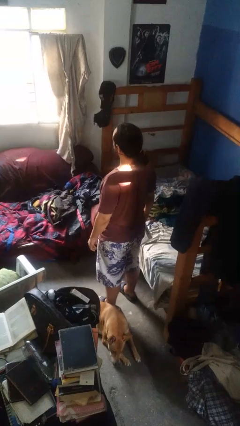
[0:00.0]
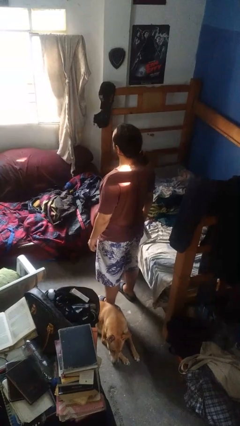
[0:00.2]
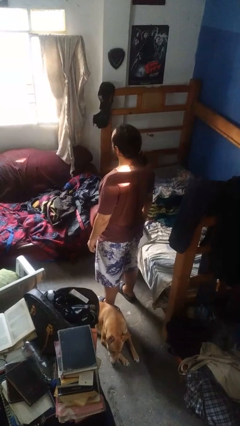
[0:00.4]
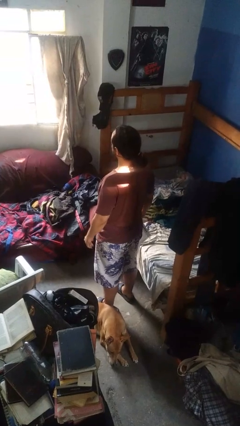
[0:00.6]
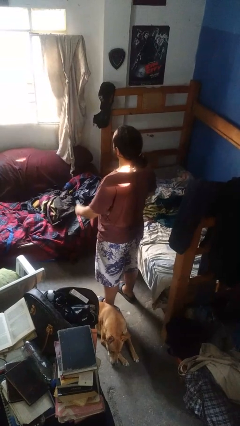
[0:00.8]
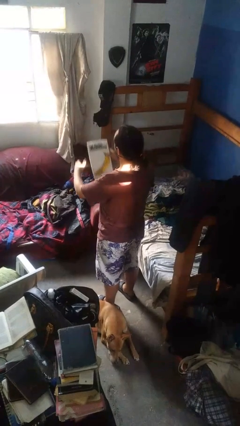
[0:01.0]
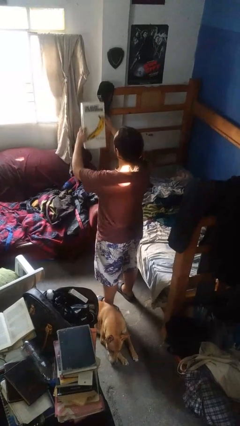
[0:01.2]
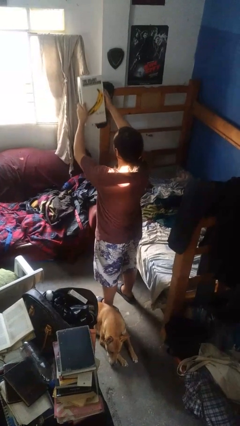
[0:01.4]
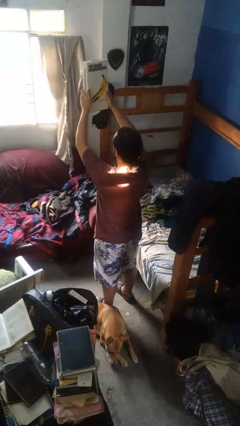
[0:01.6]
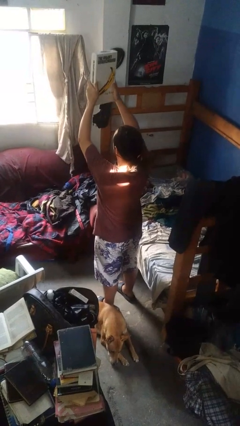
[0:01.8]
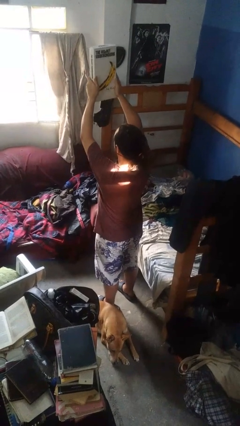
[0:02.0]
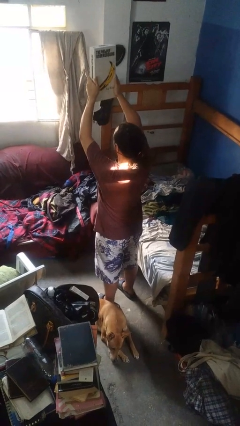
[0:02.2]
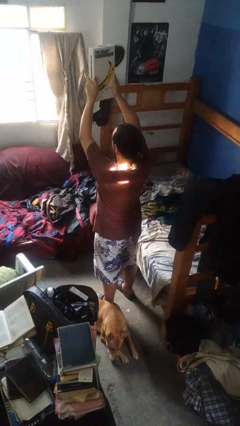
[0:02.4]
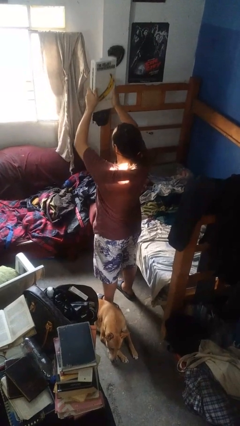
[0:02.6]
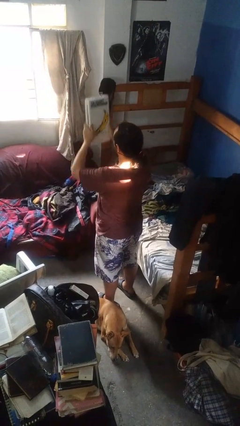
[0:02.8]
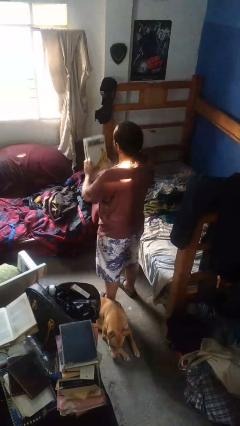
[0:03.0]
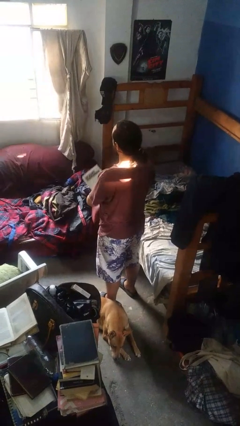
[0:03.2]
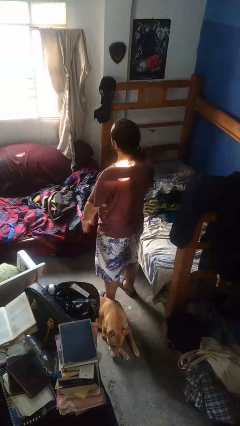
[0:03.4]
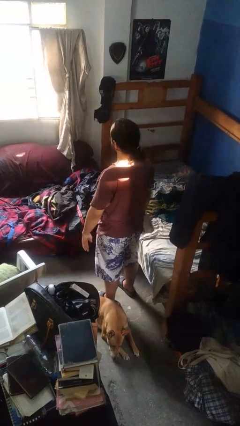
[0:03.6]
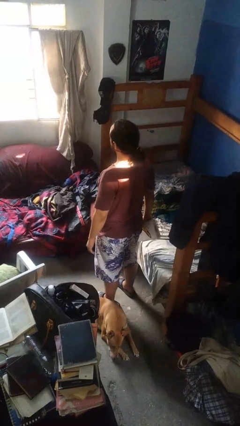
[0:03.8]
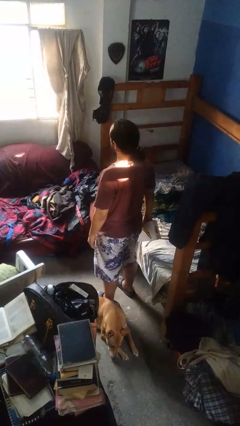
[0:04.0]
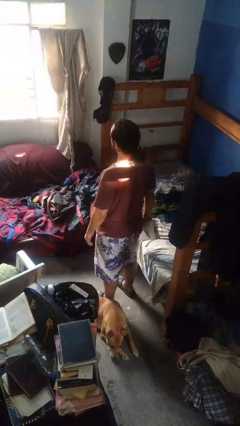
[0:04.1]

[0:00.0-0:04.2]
person holds object above head

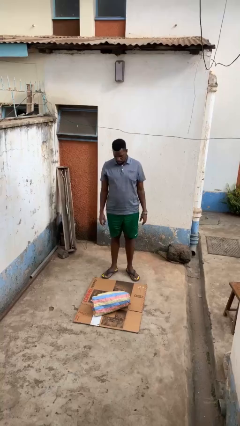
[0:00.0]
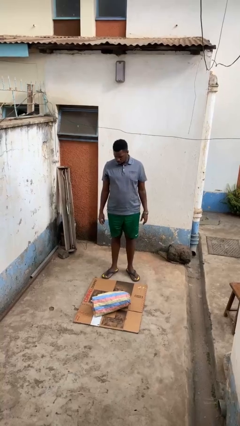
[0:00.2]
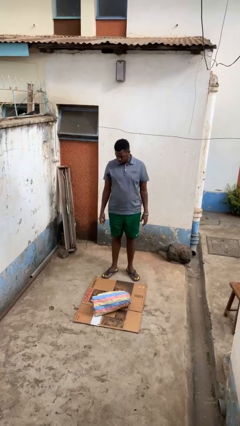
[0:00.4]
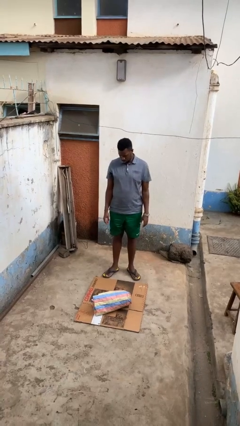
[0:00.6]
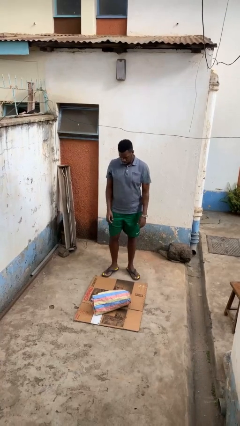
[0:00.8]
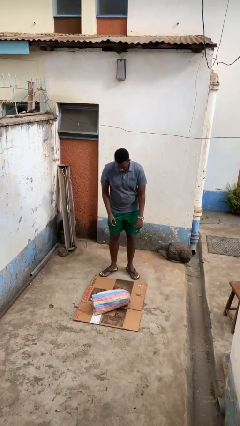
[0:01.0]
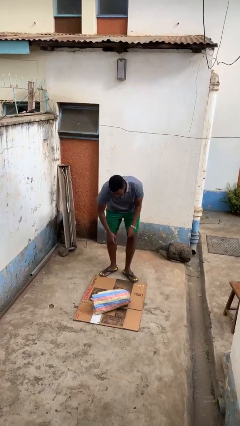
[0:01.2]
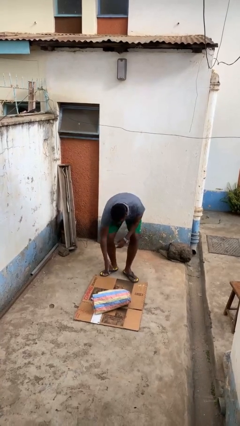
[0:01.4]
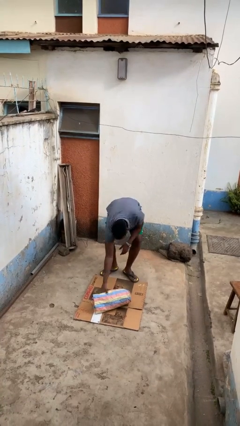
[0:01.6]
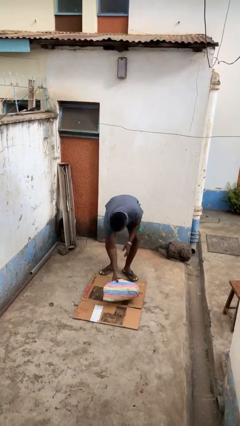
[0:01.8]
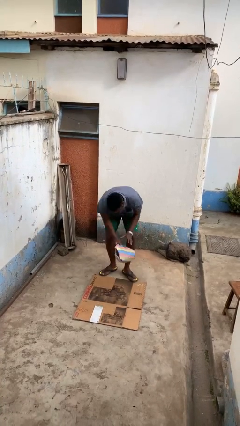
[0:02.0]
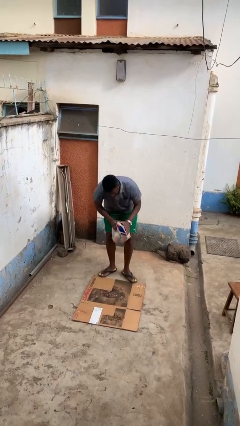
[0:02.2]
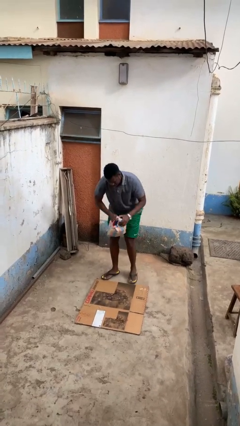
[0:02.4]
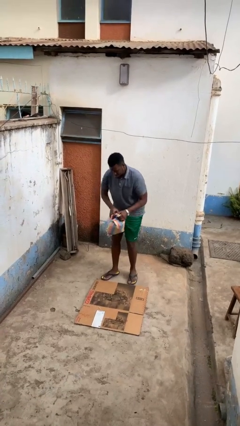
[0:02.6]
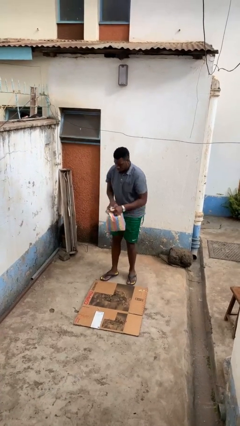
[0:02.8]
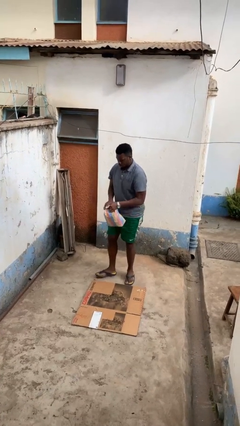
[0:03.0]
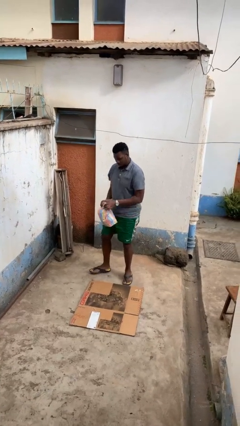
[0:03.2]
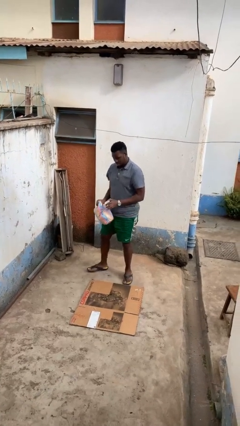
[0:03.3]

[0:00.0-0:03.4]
person picks up object from floor

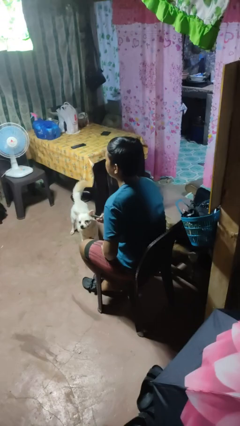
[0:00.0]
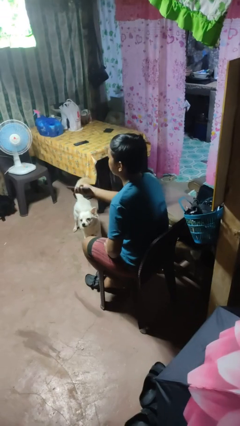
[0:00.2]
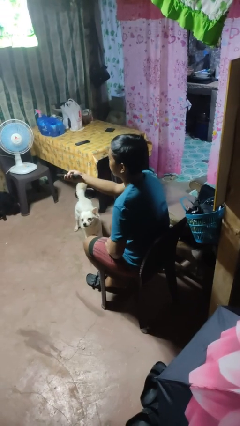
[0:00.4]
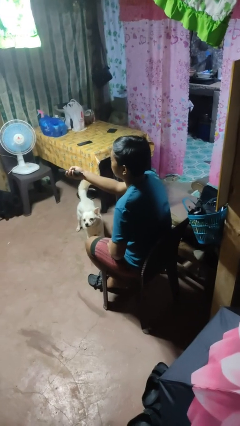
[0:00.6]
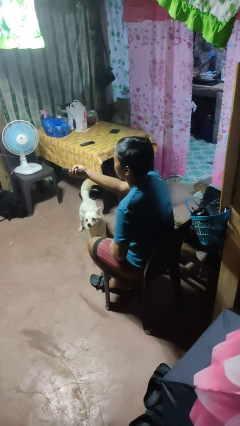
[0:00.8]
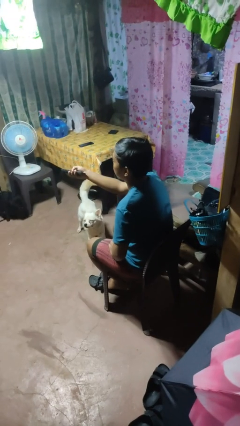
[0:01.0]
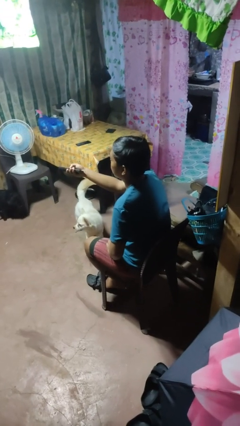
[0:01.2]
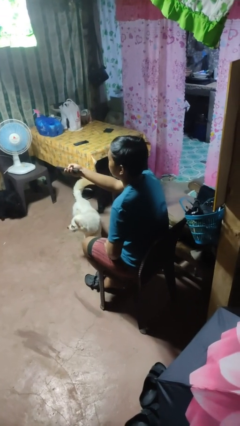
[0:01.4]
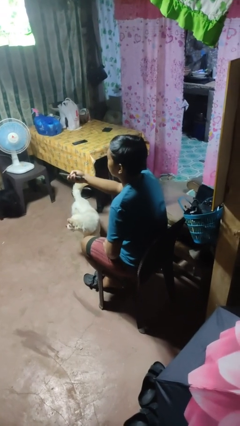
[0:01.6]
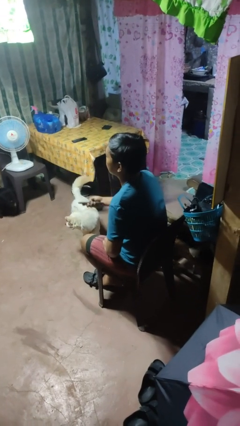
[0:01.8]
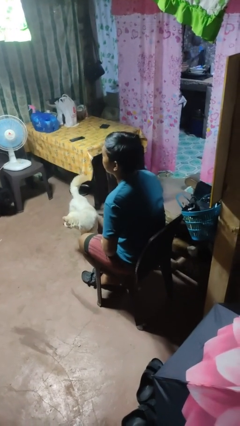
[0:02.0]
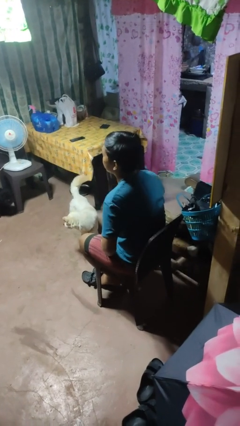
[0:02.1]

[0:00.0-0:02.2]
person uses television remote

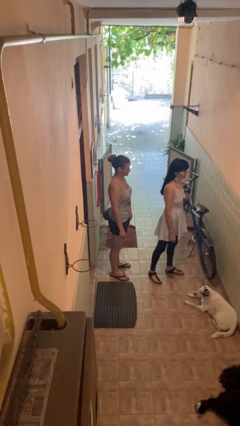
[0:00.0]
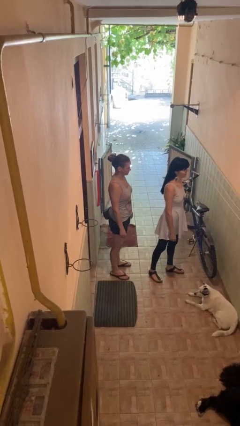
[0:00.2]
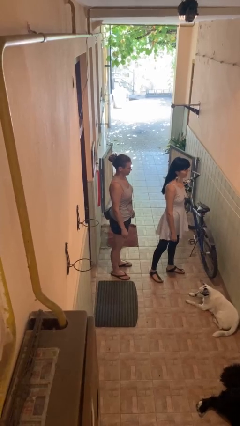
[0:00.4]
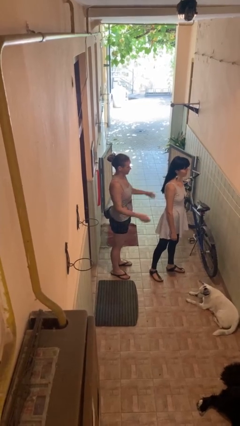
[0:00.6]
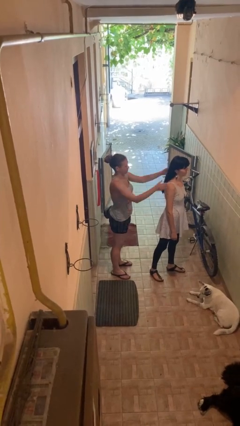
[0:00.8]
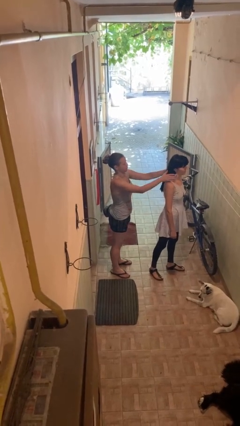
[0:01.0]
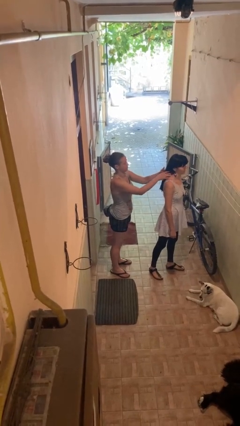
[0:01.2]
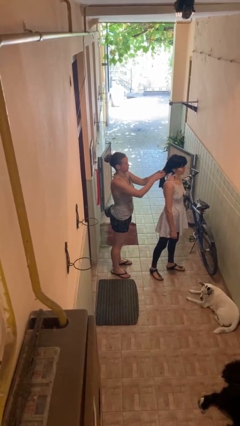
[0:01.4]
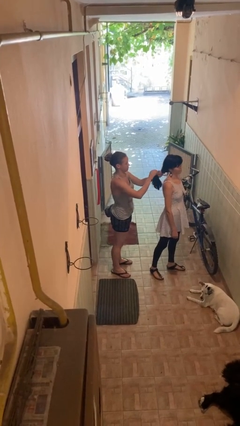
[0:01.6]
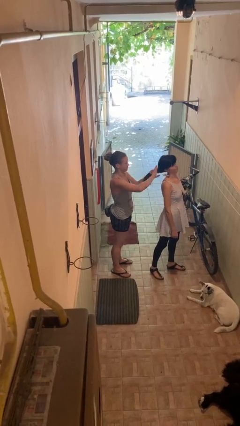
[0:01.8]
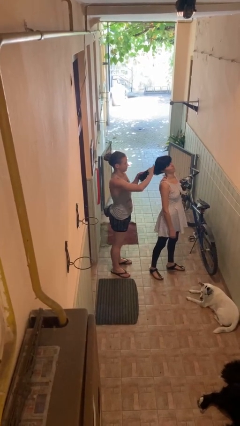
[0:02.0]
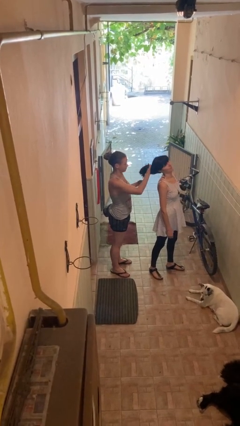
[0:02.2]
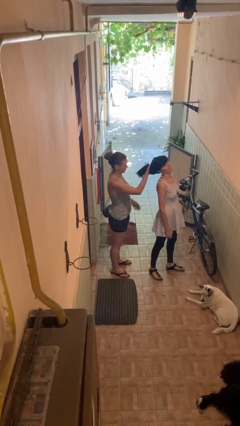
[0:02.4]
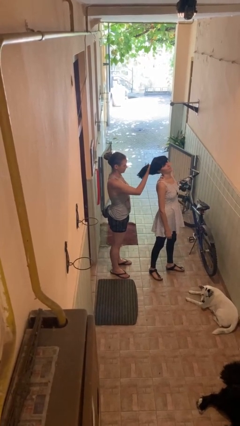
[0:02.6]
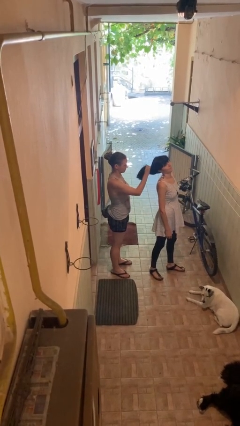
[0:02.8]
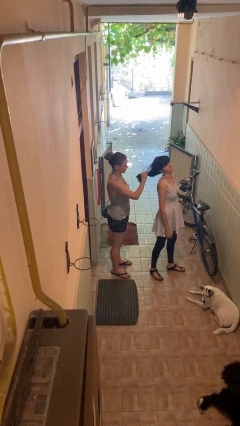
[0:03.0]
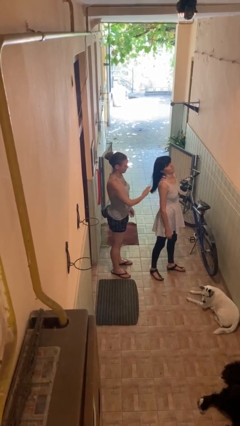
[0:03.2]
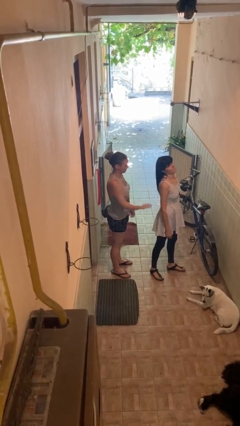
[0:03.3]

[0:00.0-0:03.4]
person grabs person by hair

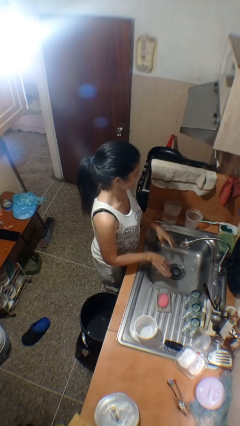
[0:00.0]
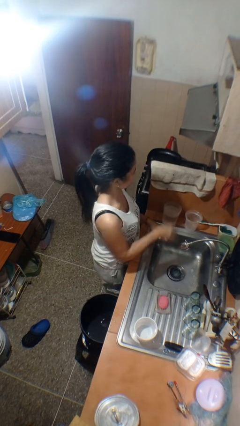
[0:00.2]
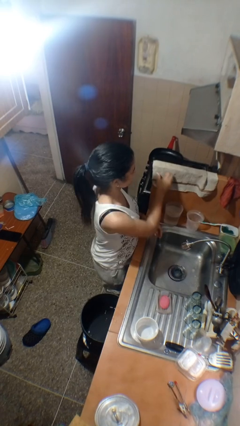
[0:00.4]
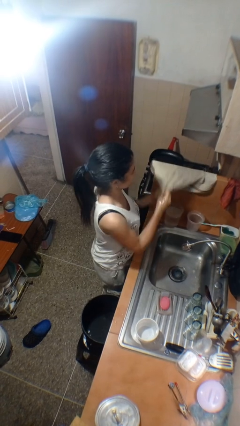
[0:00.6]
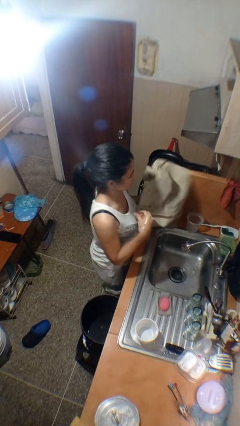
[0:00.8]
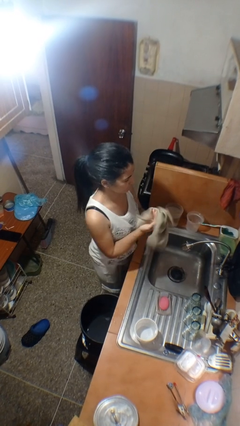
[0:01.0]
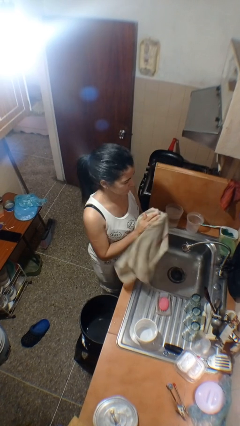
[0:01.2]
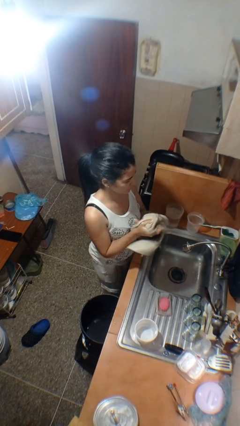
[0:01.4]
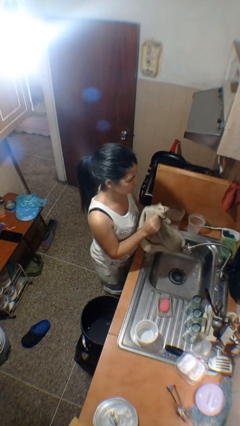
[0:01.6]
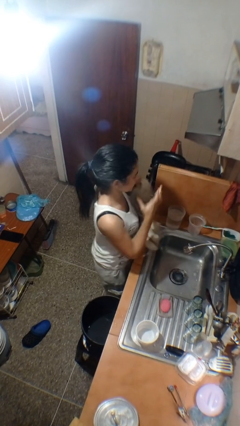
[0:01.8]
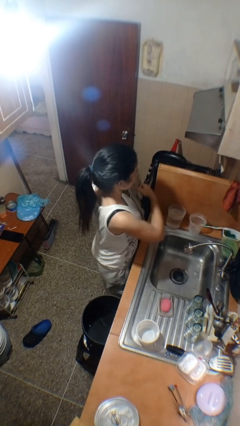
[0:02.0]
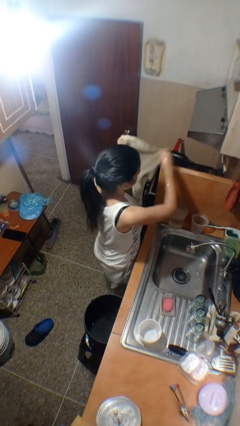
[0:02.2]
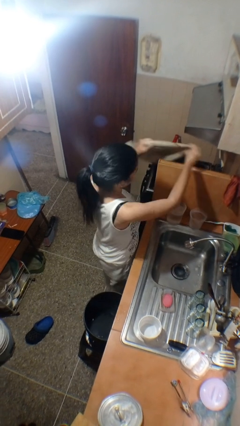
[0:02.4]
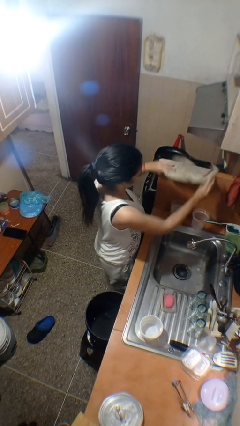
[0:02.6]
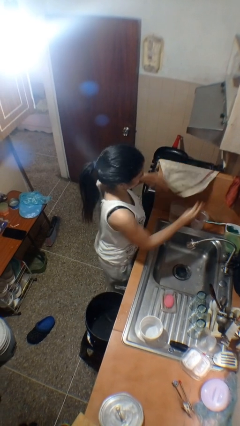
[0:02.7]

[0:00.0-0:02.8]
person dries hands with towel

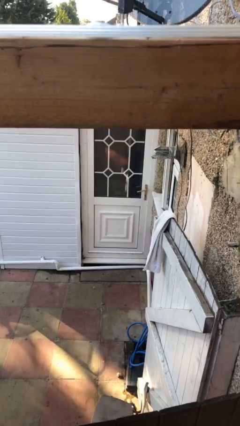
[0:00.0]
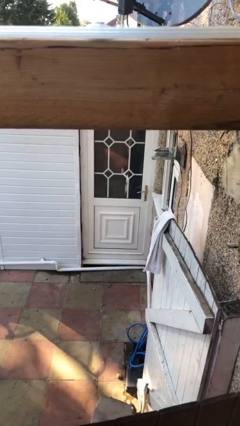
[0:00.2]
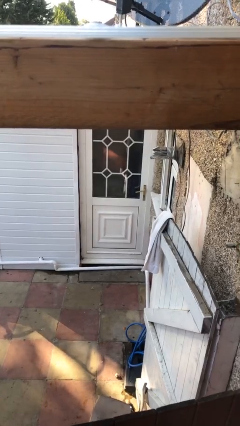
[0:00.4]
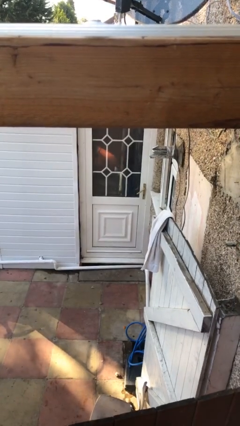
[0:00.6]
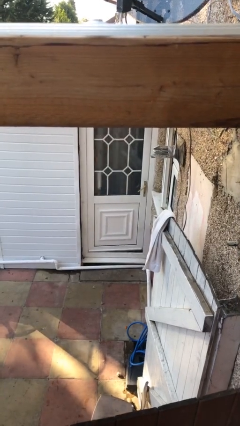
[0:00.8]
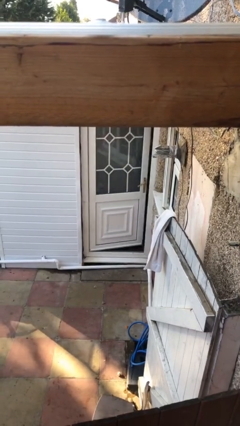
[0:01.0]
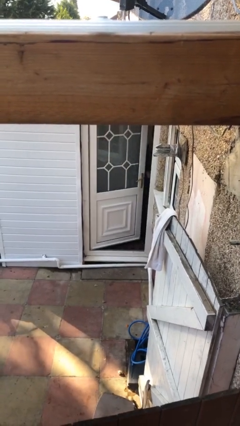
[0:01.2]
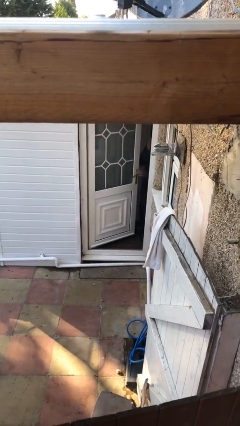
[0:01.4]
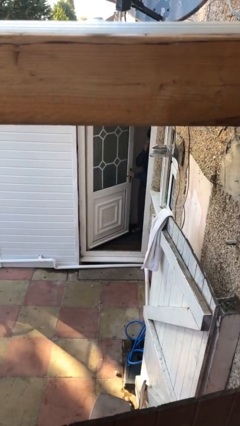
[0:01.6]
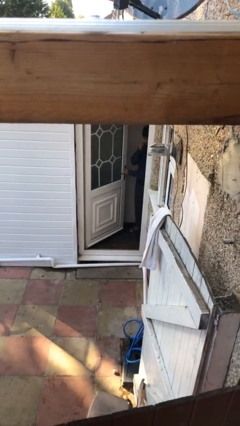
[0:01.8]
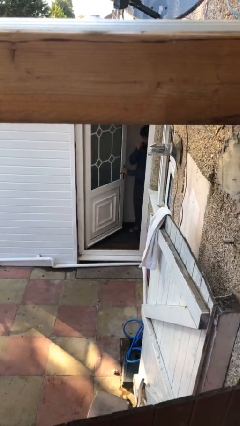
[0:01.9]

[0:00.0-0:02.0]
person opens facility door
